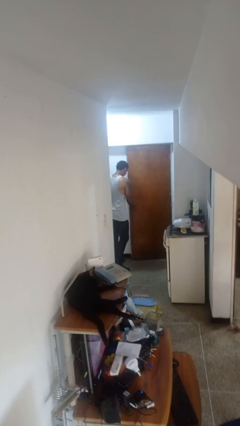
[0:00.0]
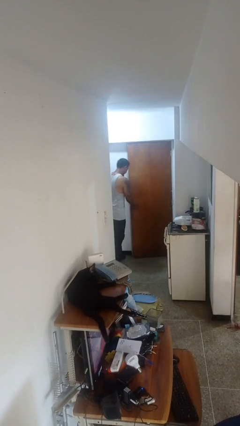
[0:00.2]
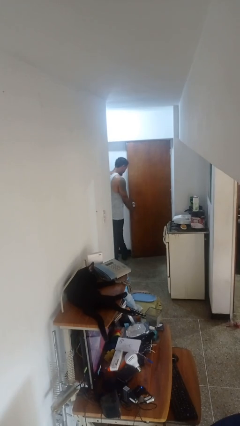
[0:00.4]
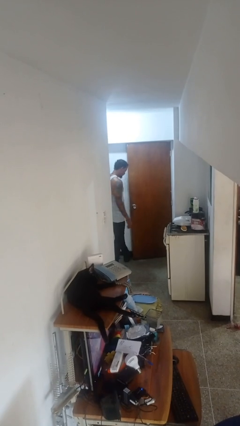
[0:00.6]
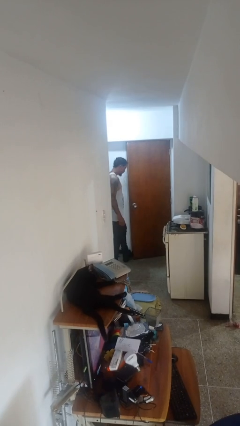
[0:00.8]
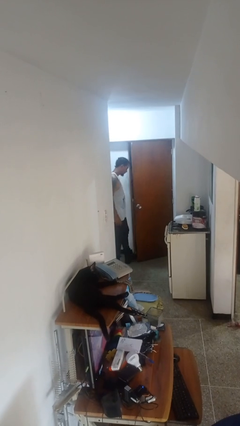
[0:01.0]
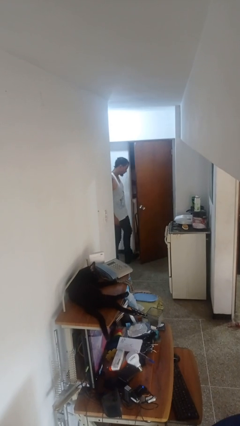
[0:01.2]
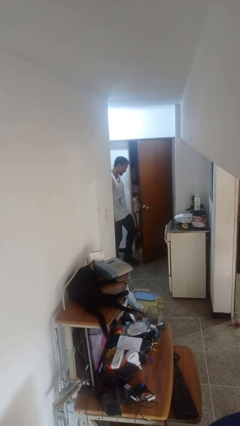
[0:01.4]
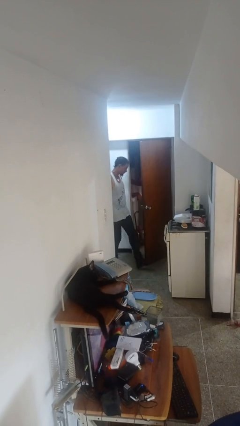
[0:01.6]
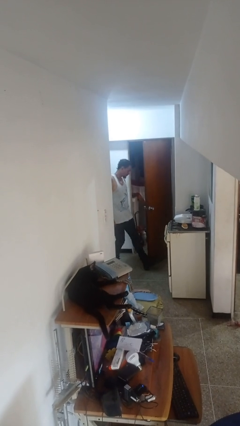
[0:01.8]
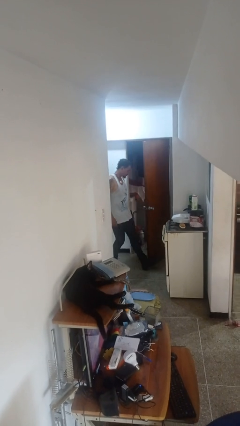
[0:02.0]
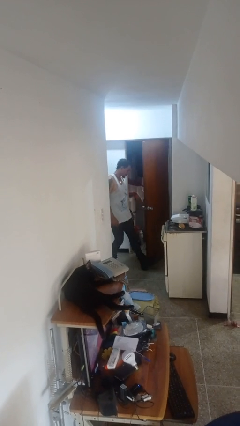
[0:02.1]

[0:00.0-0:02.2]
person opens facility door

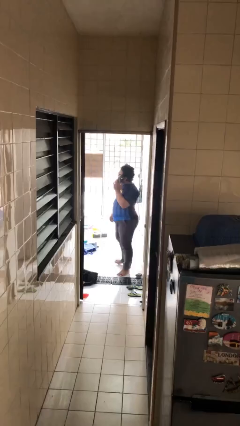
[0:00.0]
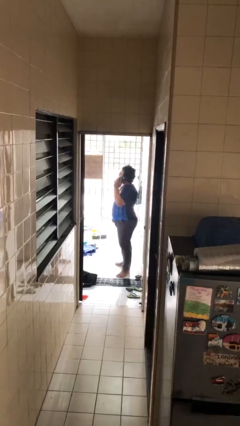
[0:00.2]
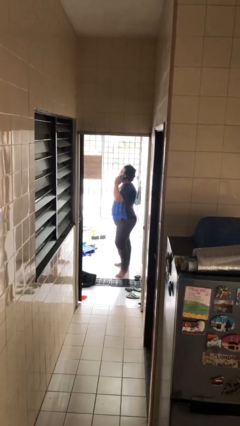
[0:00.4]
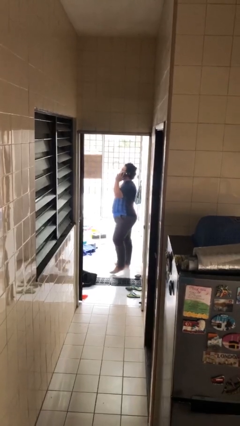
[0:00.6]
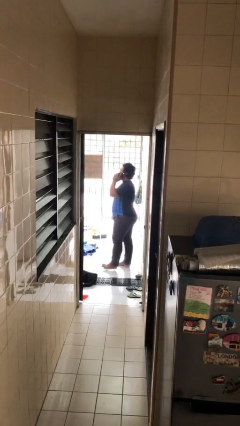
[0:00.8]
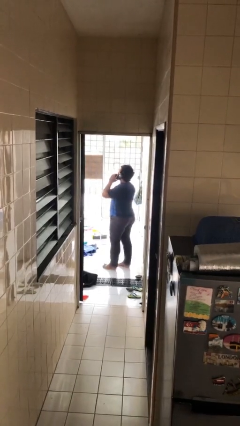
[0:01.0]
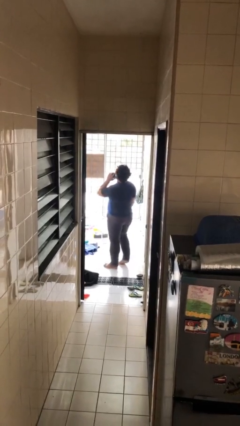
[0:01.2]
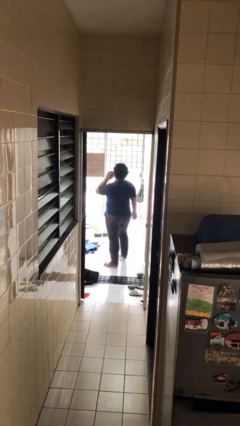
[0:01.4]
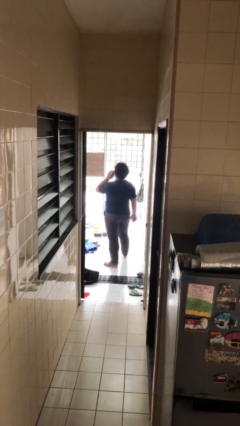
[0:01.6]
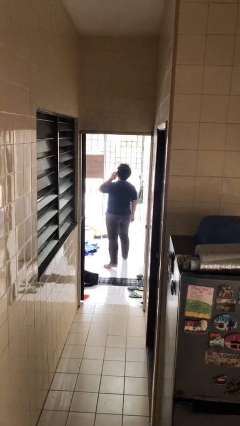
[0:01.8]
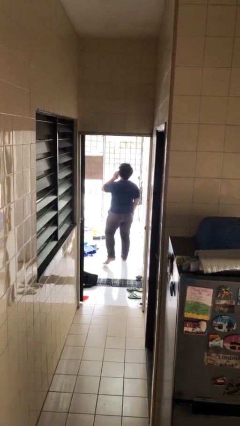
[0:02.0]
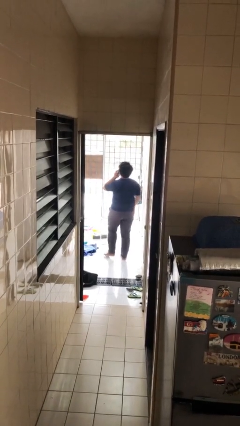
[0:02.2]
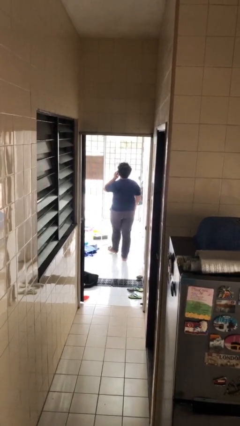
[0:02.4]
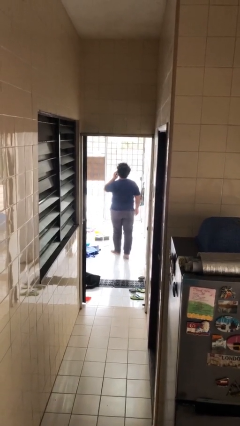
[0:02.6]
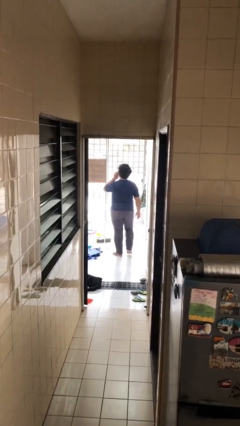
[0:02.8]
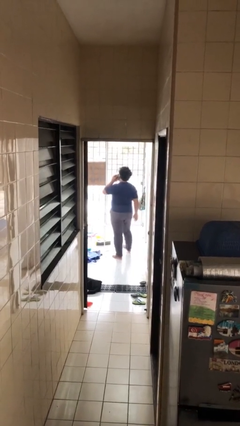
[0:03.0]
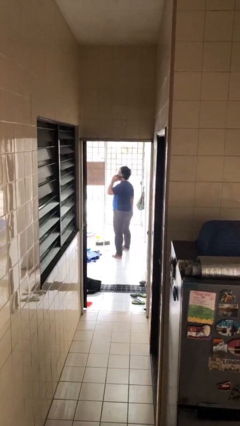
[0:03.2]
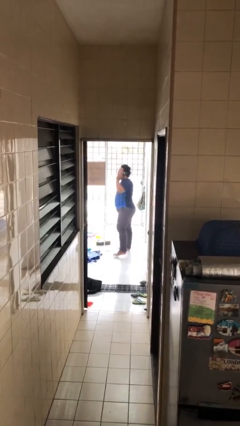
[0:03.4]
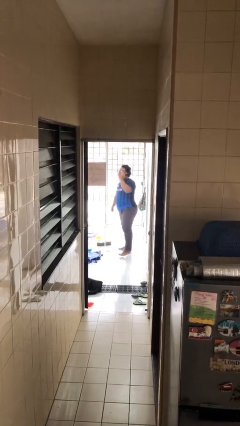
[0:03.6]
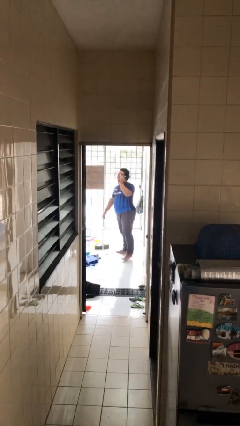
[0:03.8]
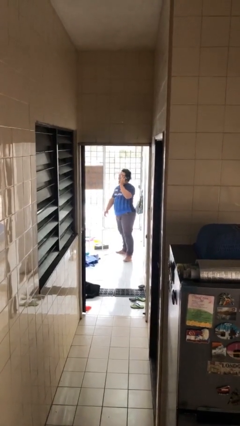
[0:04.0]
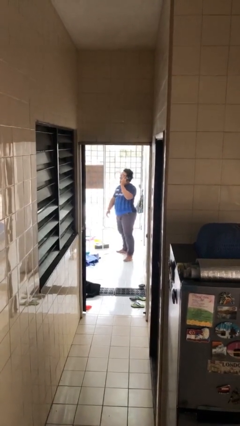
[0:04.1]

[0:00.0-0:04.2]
person talks on phone

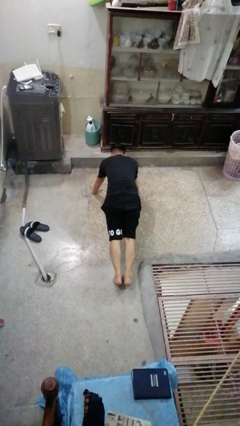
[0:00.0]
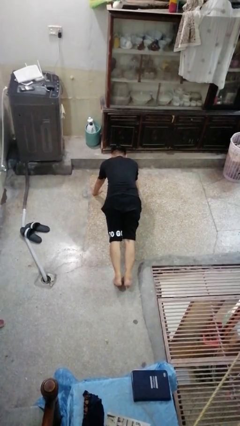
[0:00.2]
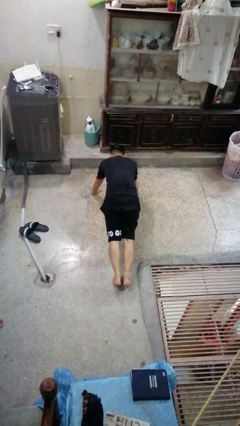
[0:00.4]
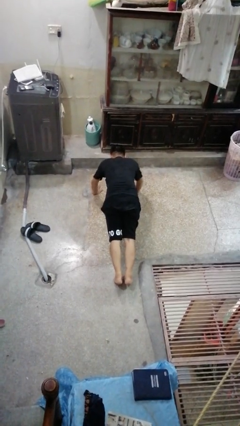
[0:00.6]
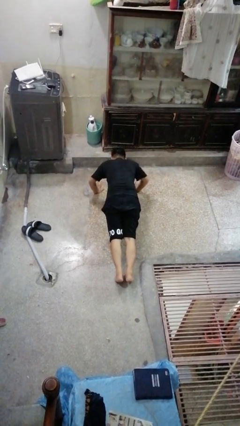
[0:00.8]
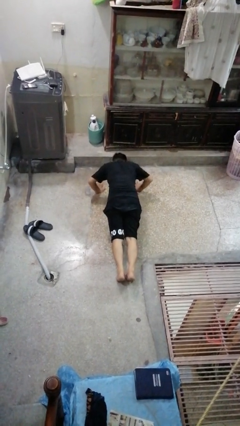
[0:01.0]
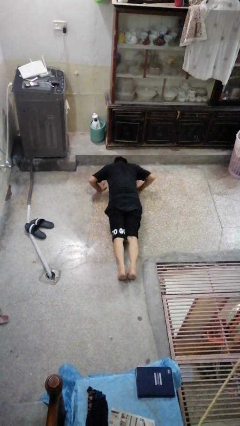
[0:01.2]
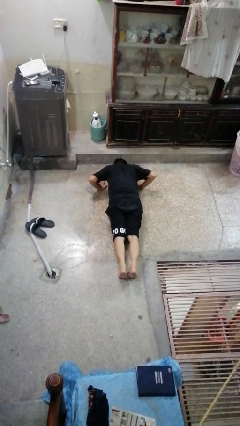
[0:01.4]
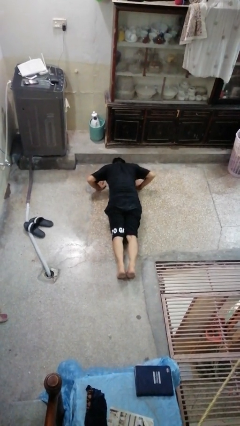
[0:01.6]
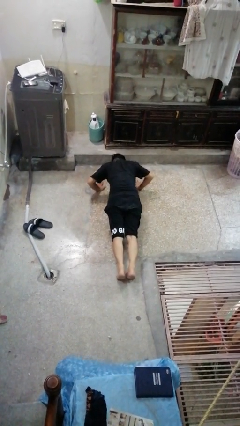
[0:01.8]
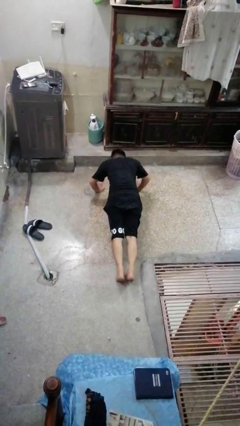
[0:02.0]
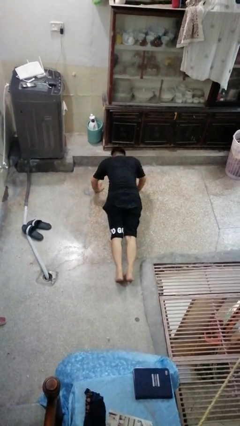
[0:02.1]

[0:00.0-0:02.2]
person exercises with pushup

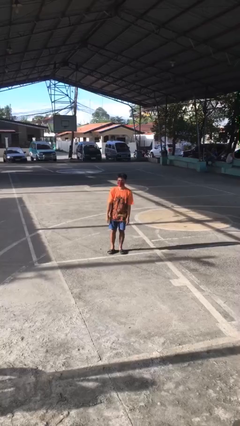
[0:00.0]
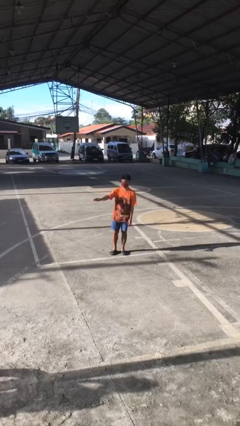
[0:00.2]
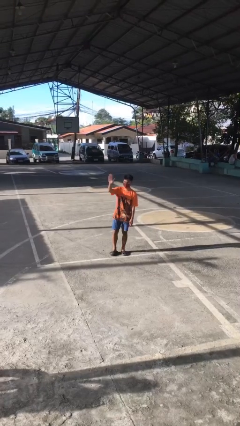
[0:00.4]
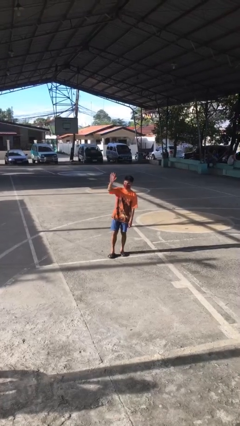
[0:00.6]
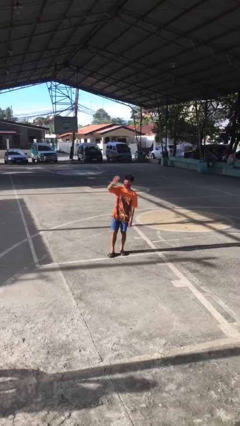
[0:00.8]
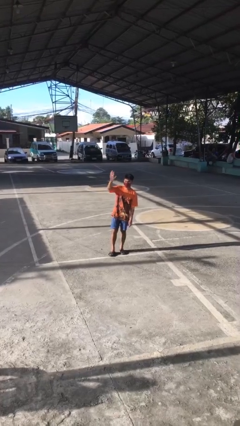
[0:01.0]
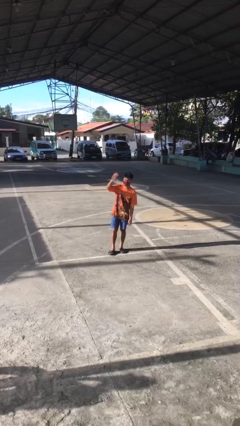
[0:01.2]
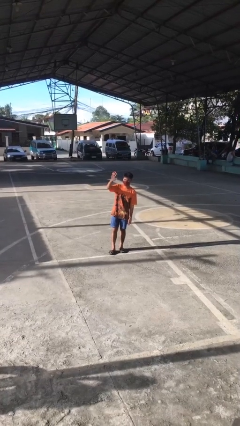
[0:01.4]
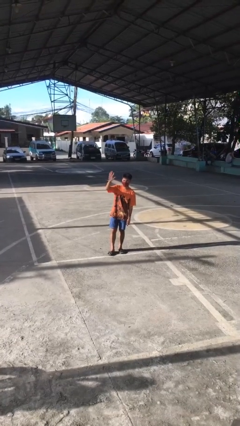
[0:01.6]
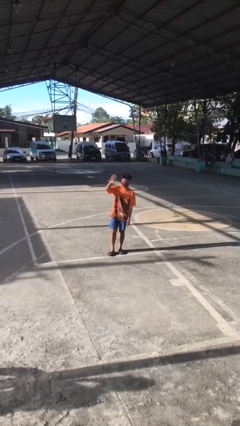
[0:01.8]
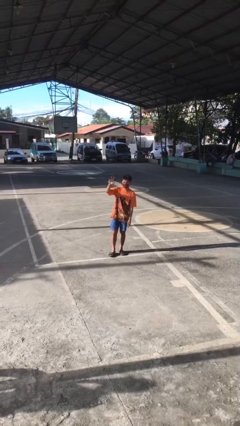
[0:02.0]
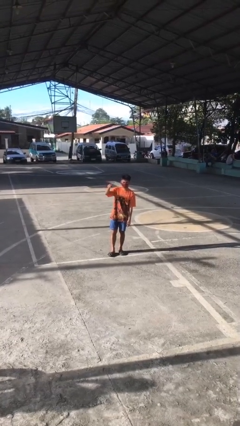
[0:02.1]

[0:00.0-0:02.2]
person waves at person

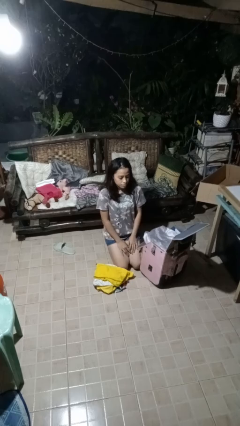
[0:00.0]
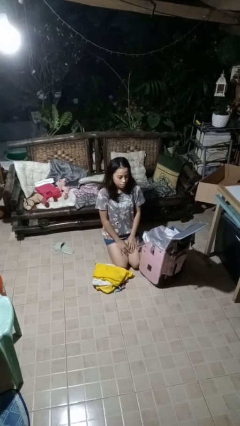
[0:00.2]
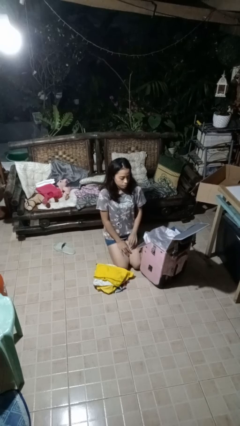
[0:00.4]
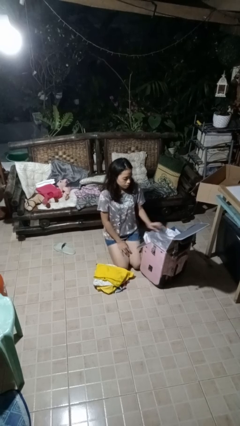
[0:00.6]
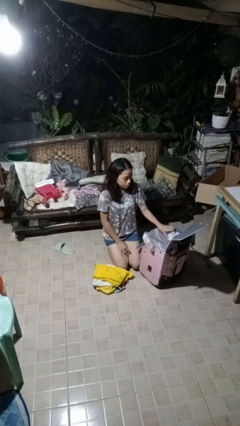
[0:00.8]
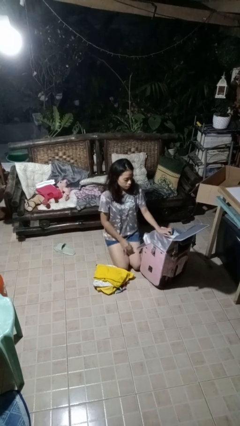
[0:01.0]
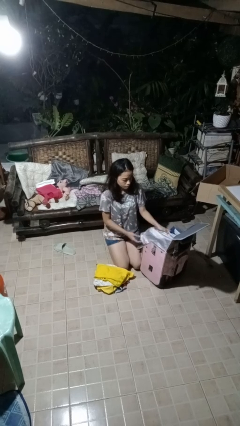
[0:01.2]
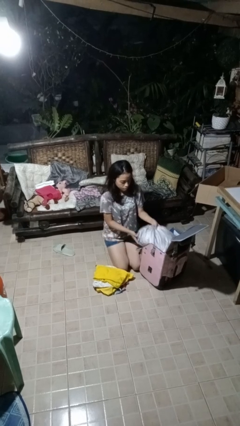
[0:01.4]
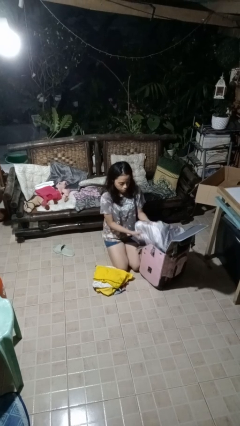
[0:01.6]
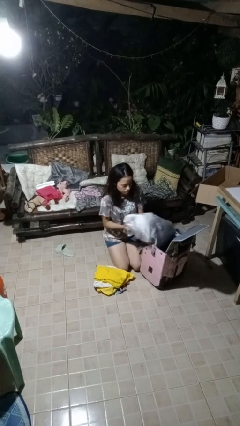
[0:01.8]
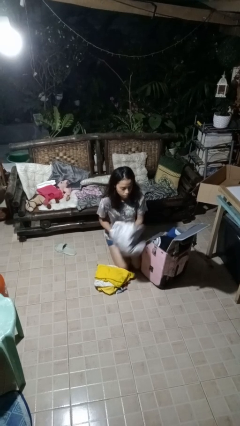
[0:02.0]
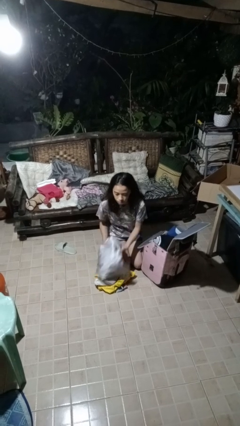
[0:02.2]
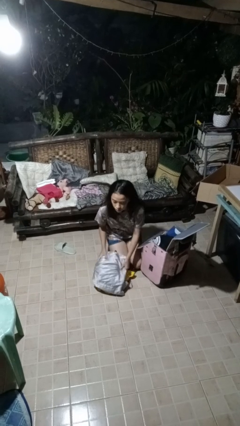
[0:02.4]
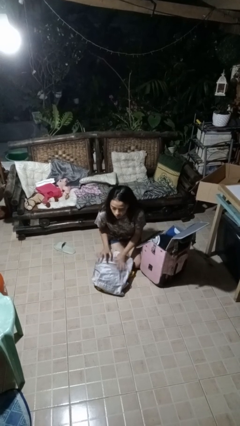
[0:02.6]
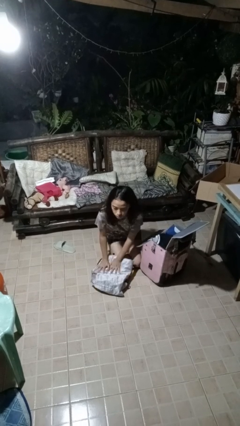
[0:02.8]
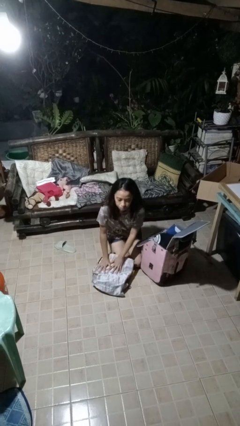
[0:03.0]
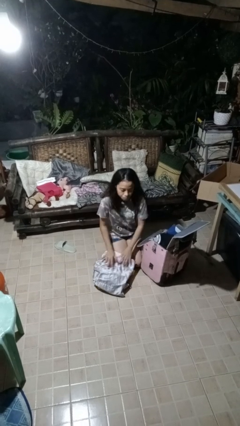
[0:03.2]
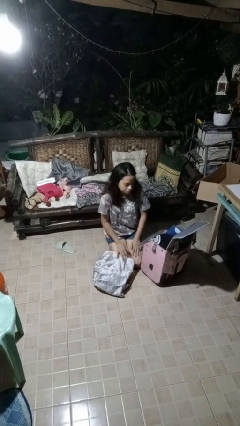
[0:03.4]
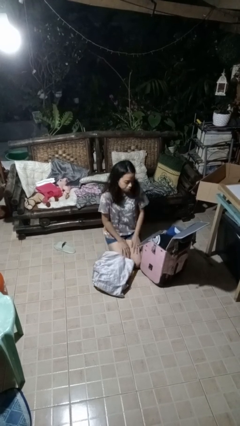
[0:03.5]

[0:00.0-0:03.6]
person unloads clothes from suitcase

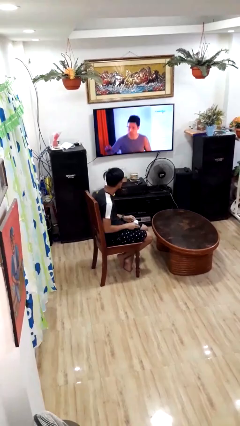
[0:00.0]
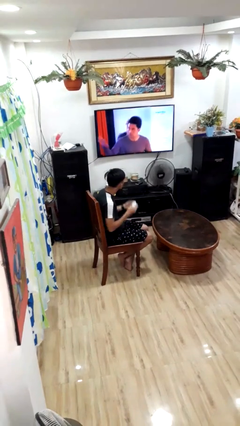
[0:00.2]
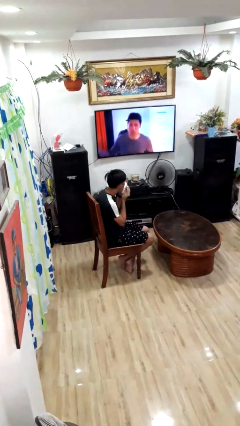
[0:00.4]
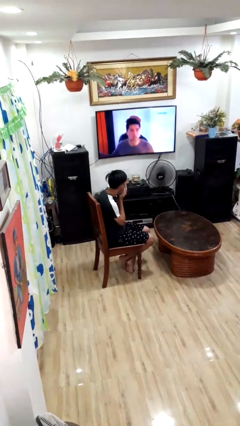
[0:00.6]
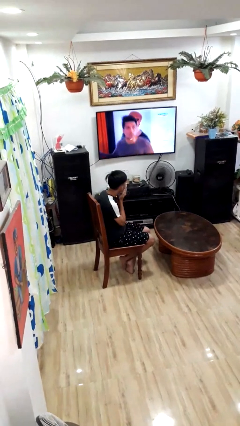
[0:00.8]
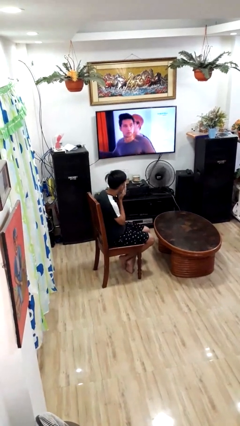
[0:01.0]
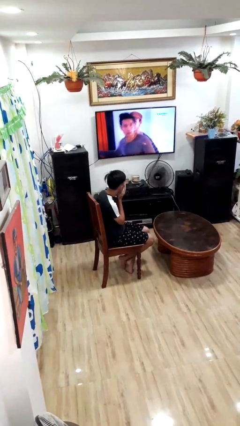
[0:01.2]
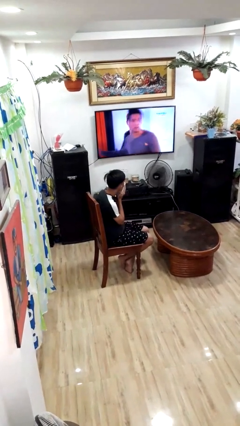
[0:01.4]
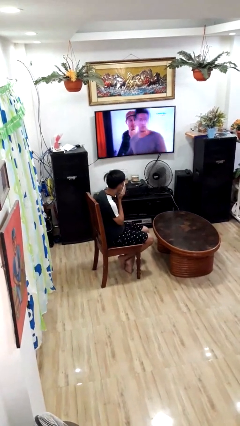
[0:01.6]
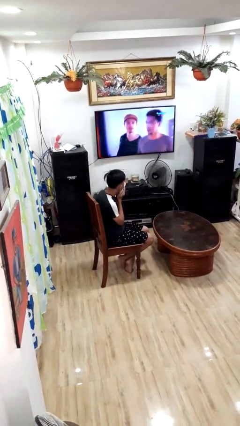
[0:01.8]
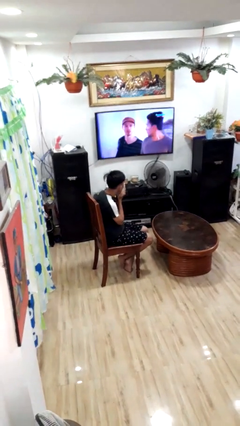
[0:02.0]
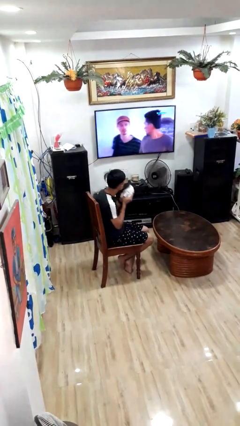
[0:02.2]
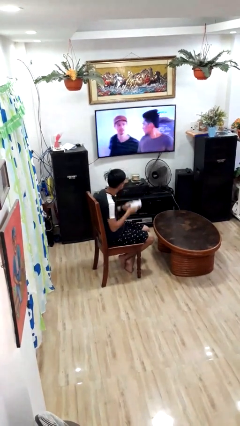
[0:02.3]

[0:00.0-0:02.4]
person wipes mouth with napkin

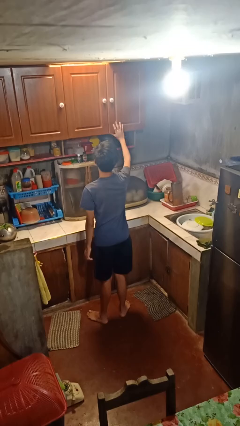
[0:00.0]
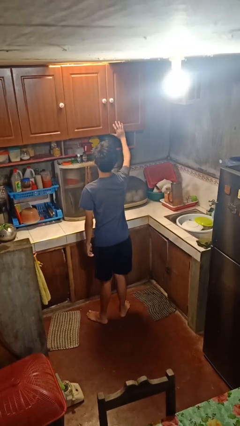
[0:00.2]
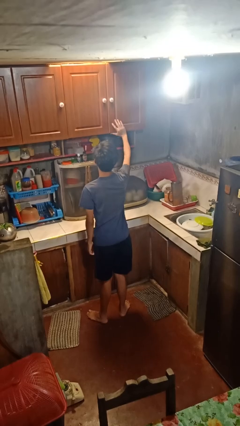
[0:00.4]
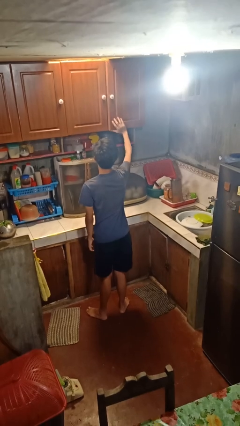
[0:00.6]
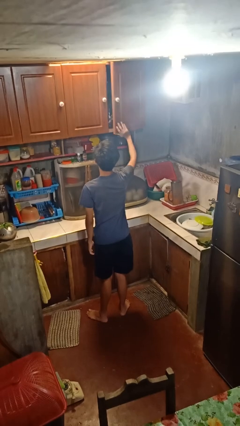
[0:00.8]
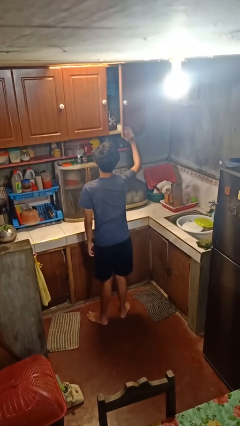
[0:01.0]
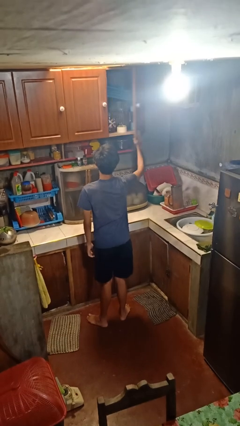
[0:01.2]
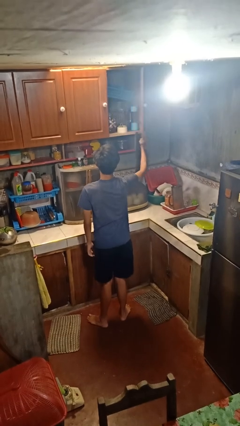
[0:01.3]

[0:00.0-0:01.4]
person opens cabinet
